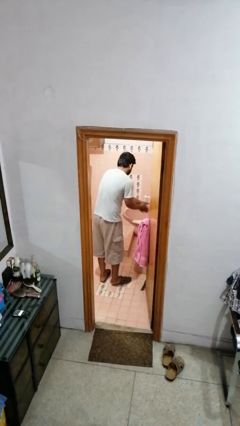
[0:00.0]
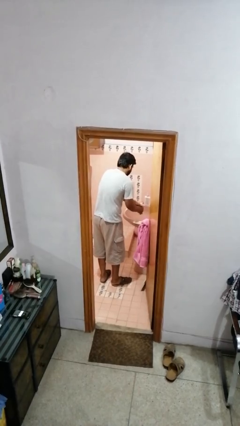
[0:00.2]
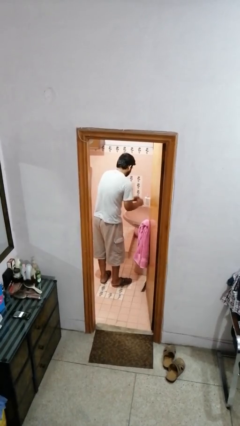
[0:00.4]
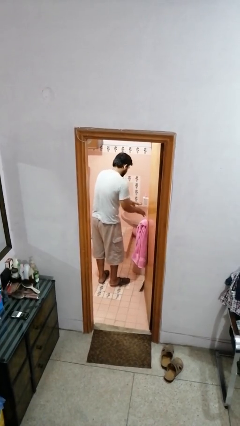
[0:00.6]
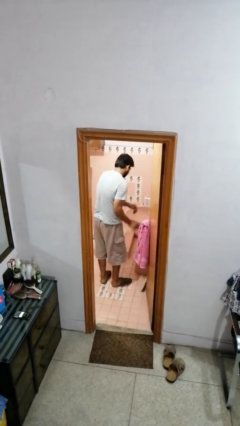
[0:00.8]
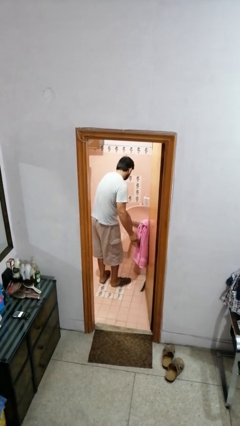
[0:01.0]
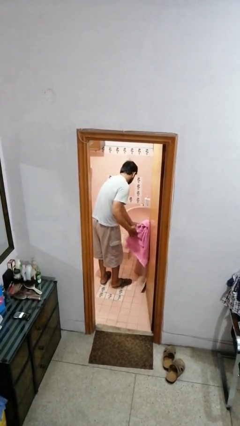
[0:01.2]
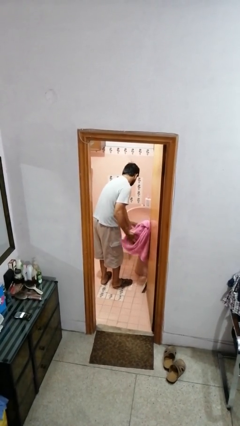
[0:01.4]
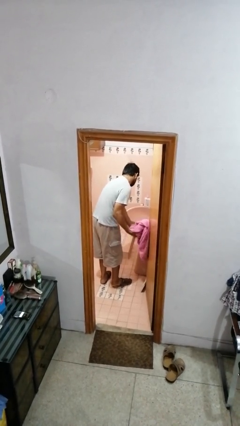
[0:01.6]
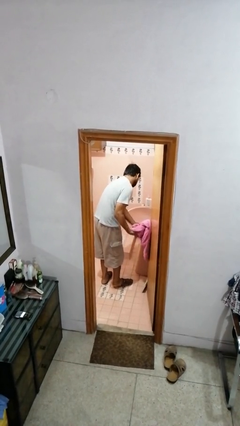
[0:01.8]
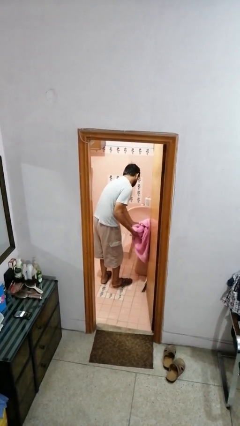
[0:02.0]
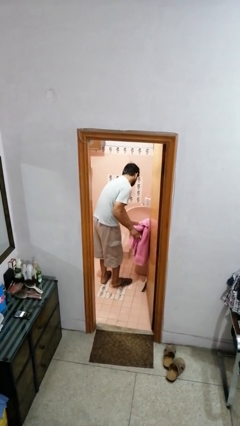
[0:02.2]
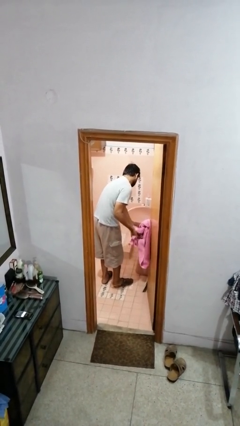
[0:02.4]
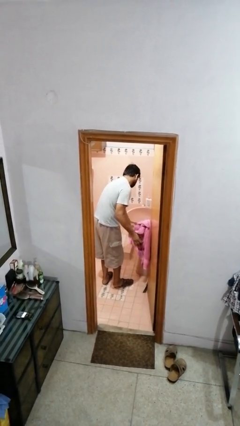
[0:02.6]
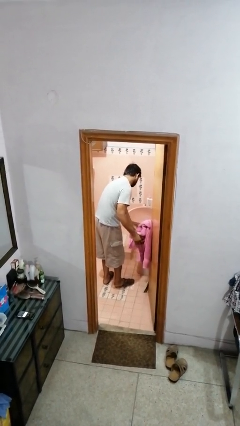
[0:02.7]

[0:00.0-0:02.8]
person dries hands with towel

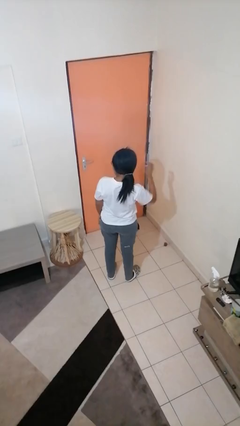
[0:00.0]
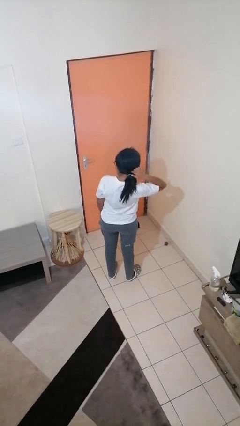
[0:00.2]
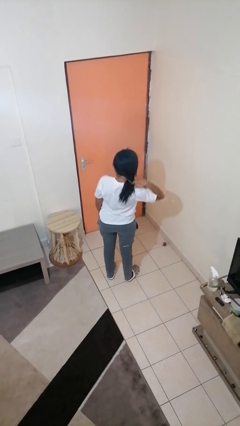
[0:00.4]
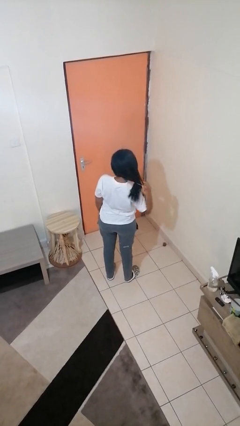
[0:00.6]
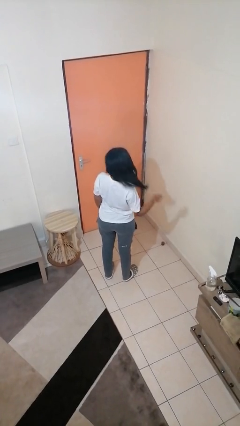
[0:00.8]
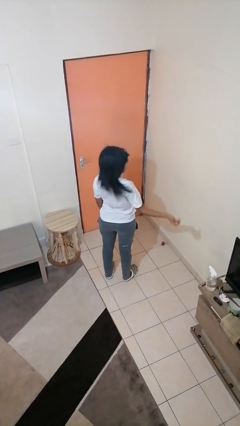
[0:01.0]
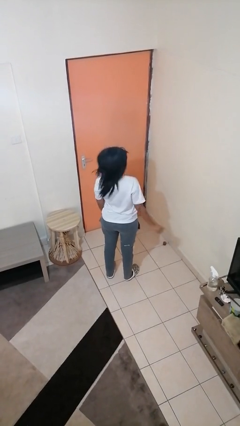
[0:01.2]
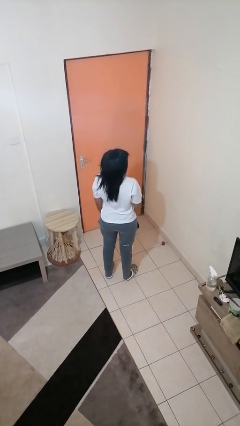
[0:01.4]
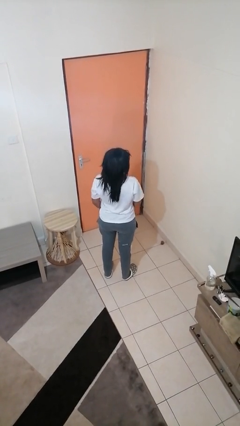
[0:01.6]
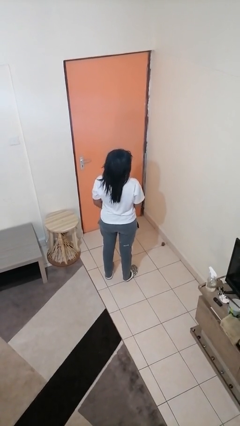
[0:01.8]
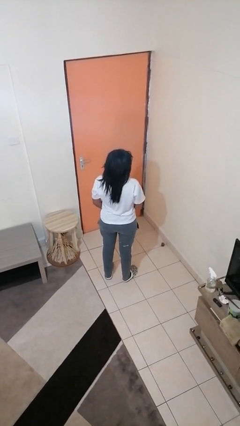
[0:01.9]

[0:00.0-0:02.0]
person takes off hairtie

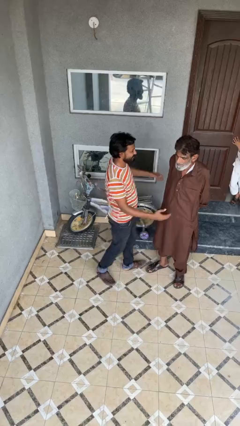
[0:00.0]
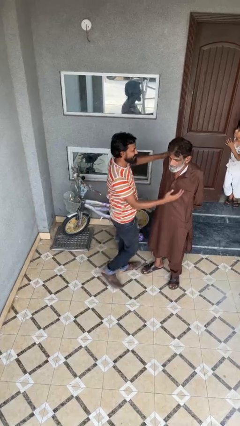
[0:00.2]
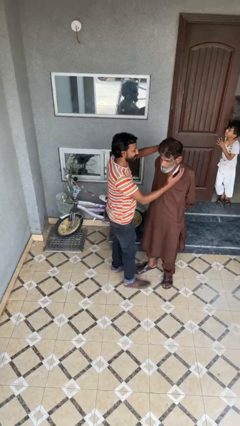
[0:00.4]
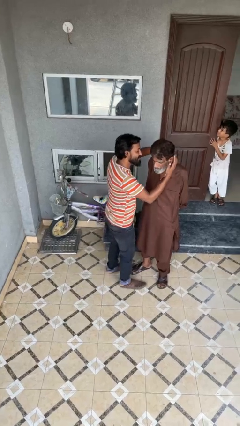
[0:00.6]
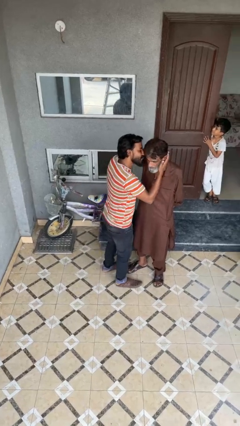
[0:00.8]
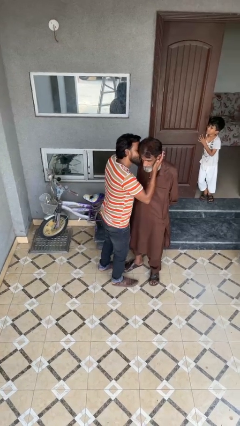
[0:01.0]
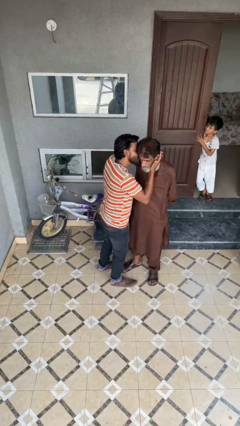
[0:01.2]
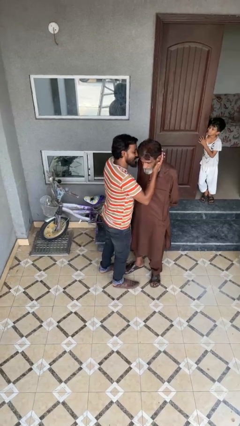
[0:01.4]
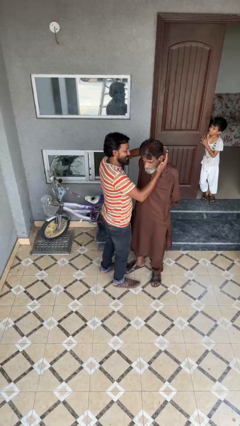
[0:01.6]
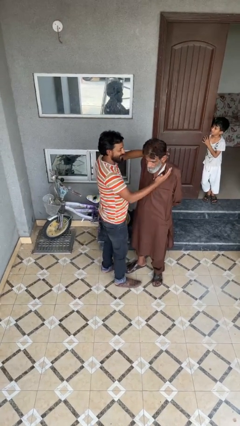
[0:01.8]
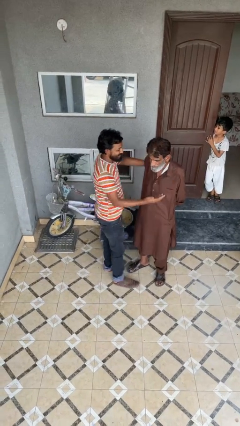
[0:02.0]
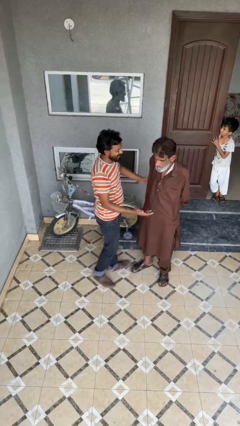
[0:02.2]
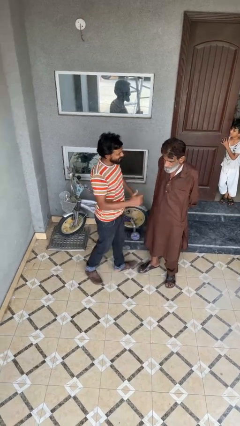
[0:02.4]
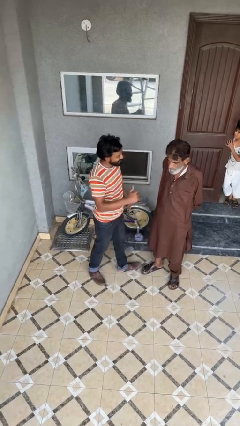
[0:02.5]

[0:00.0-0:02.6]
person kisses cheek of person

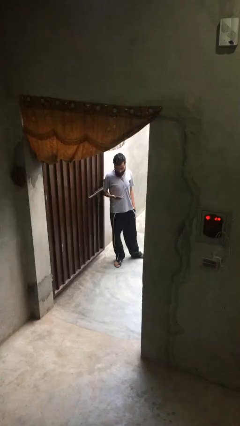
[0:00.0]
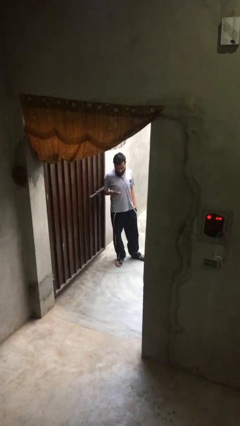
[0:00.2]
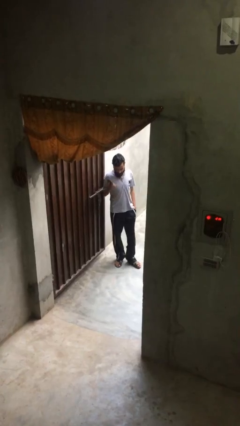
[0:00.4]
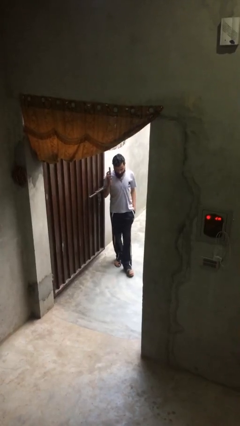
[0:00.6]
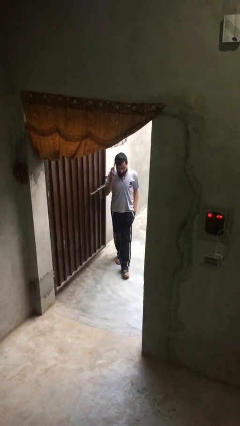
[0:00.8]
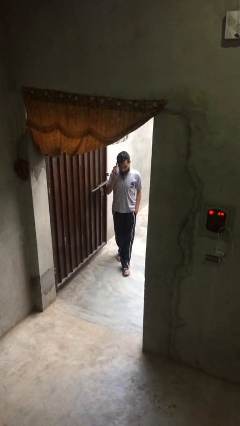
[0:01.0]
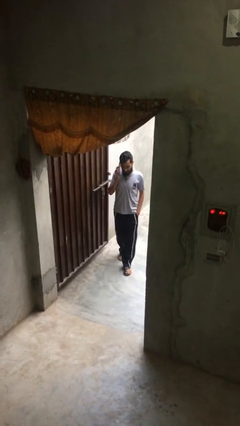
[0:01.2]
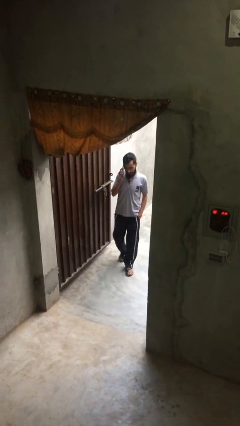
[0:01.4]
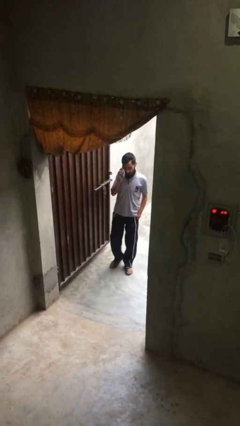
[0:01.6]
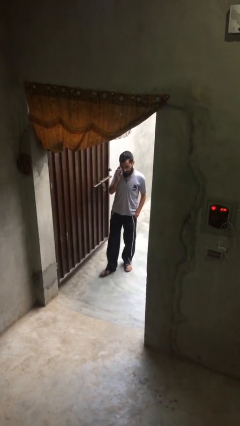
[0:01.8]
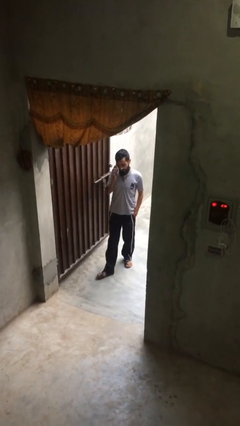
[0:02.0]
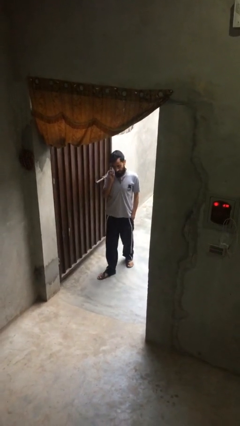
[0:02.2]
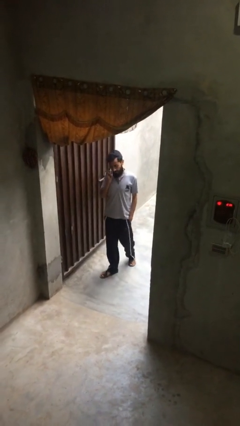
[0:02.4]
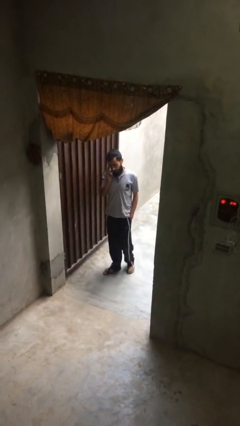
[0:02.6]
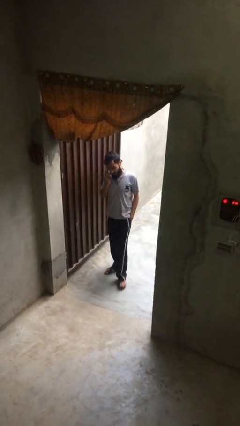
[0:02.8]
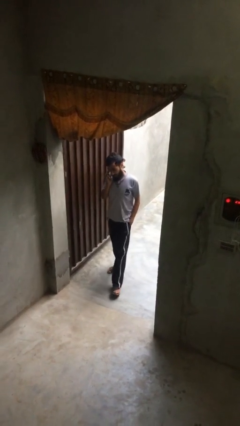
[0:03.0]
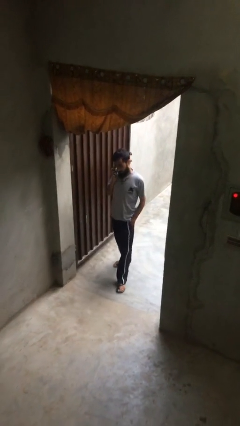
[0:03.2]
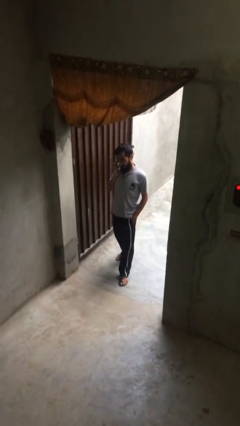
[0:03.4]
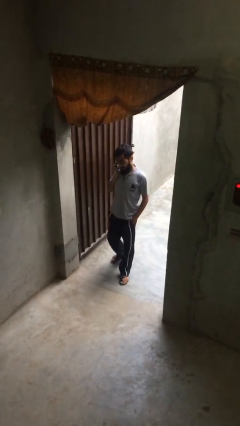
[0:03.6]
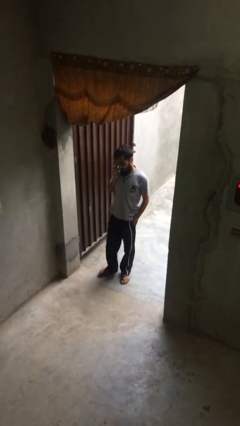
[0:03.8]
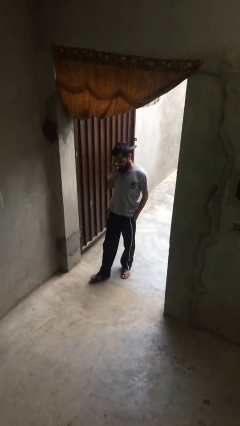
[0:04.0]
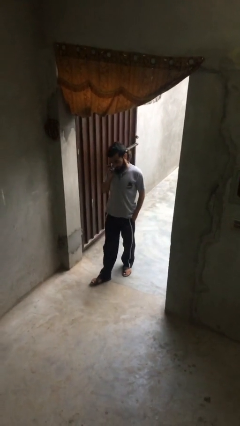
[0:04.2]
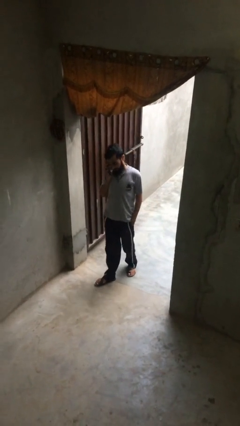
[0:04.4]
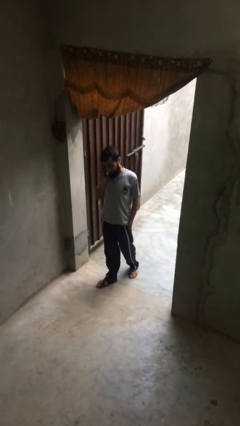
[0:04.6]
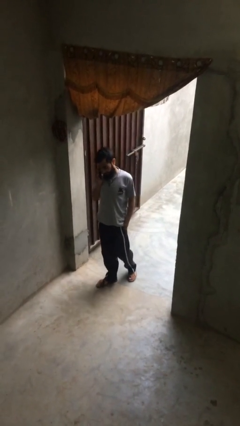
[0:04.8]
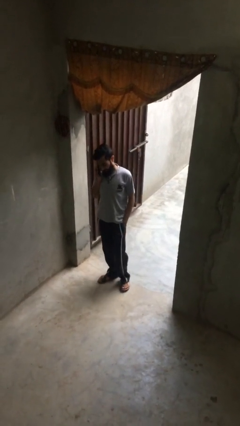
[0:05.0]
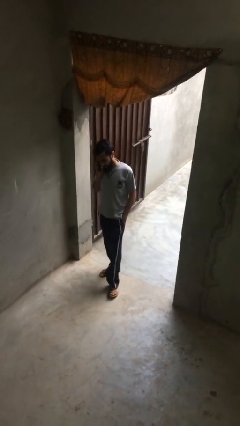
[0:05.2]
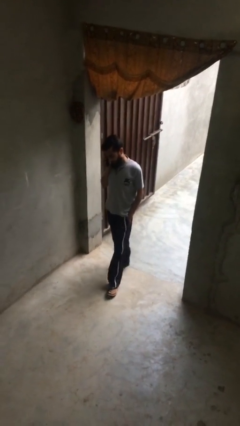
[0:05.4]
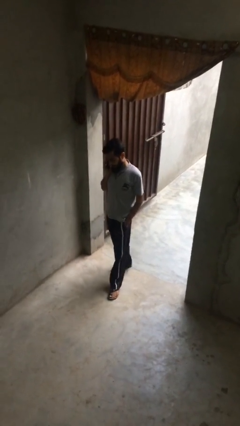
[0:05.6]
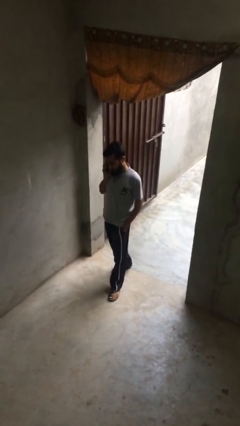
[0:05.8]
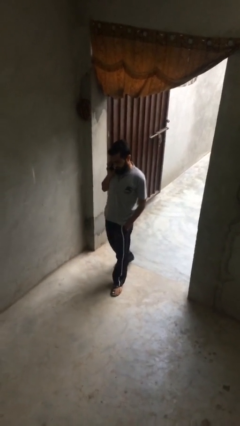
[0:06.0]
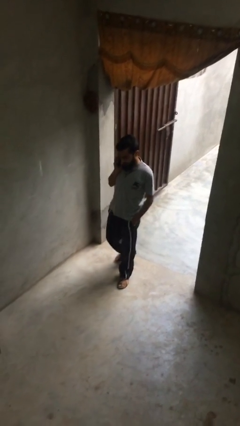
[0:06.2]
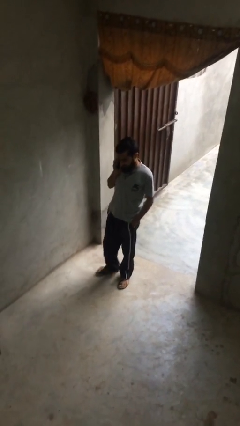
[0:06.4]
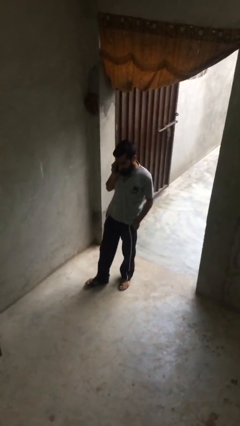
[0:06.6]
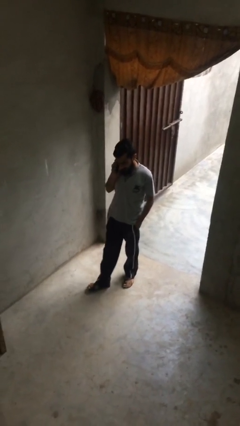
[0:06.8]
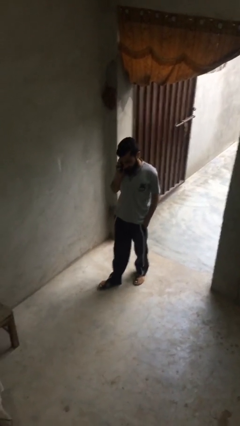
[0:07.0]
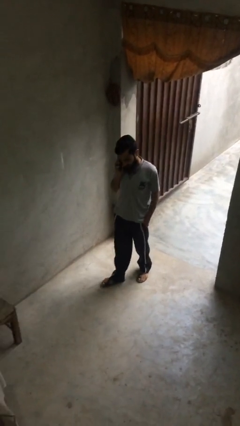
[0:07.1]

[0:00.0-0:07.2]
person enters scene through structure

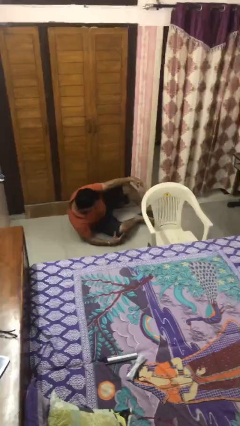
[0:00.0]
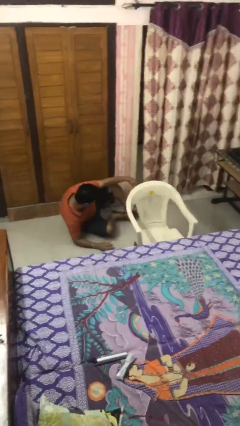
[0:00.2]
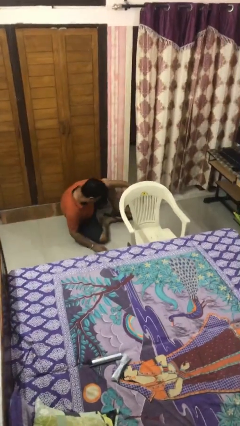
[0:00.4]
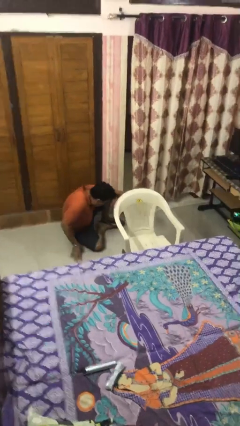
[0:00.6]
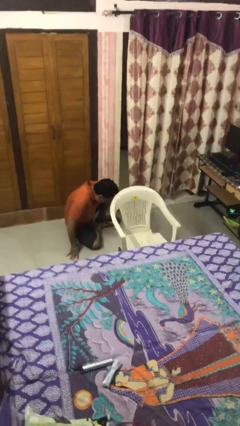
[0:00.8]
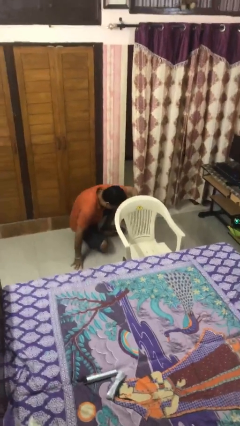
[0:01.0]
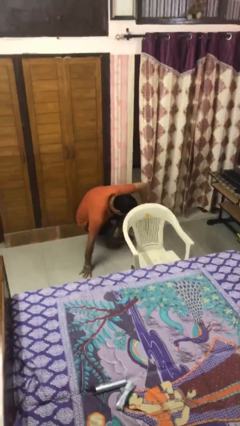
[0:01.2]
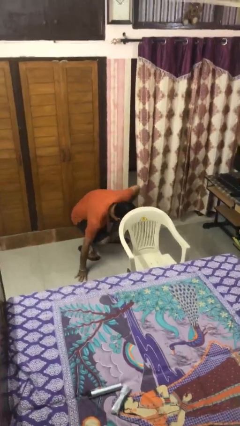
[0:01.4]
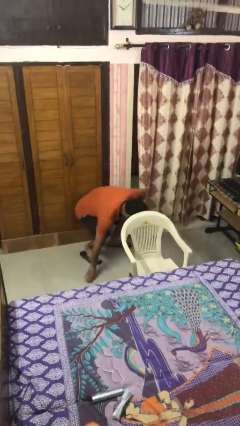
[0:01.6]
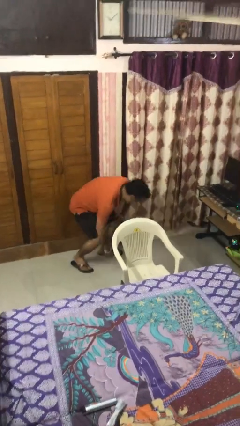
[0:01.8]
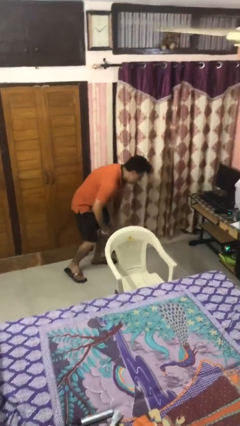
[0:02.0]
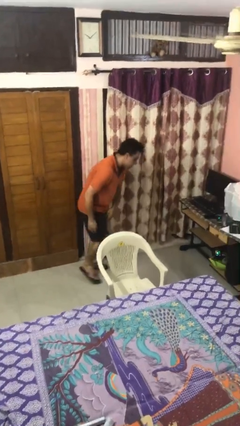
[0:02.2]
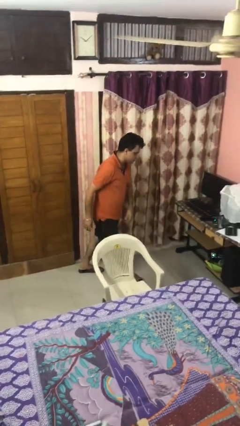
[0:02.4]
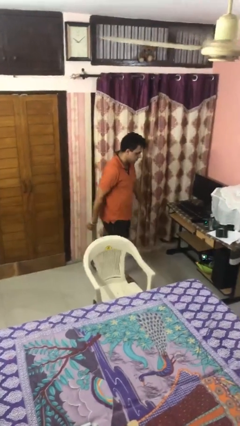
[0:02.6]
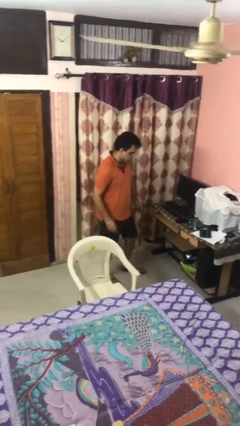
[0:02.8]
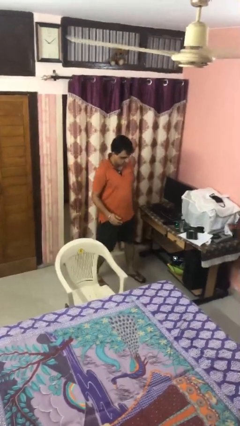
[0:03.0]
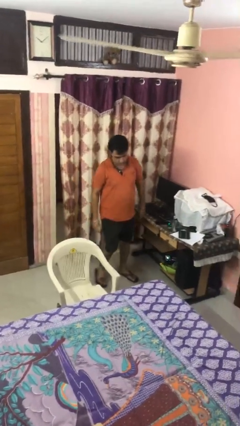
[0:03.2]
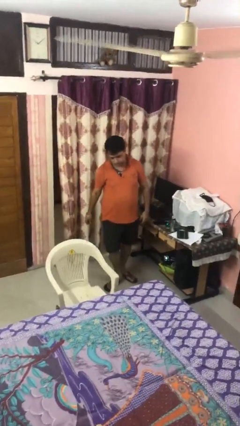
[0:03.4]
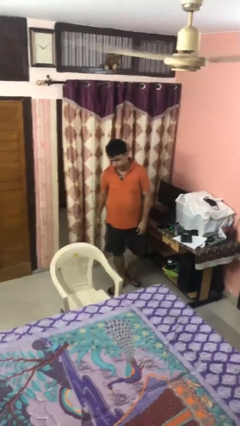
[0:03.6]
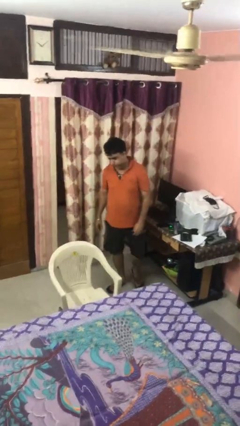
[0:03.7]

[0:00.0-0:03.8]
person stands up from floor
